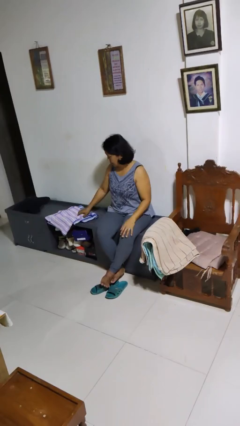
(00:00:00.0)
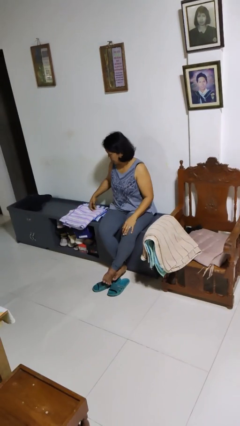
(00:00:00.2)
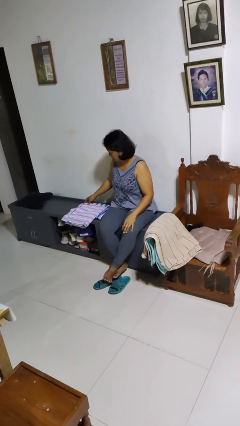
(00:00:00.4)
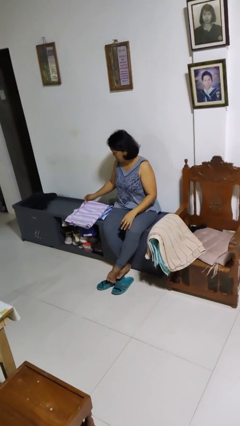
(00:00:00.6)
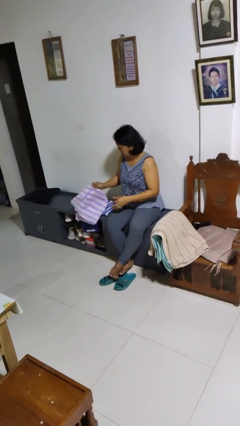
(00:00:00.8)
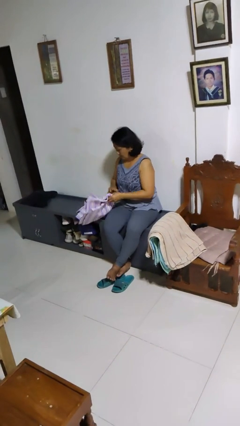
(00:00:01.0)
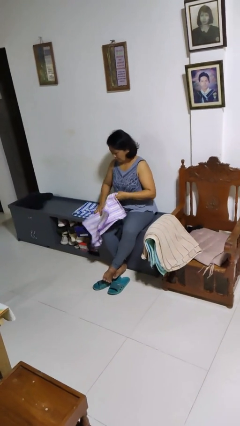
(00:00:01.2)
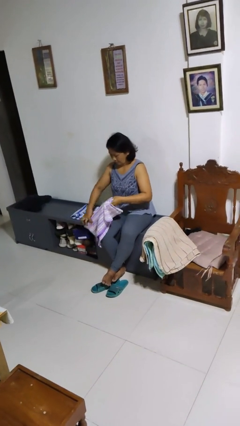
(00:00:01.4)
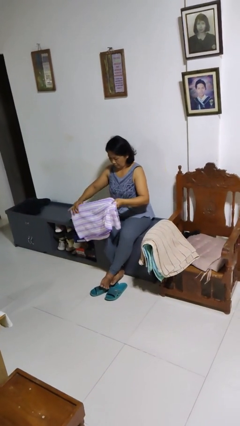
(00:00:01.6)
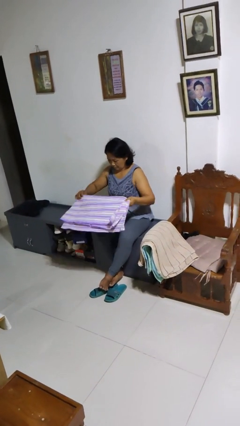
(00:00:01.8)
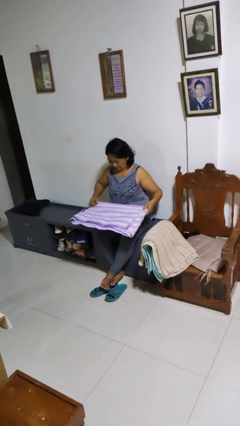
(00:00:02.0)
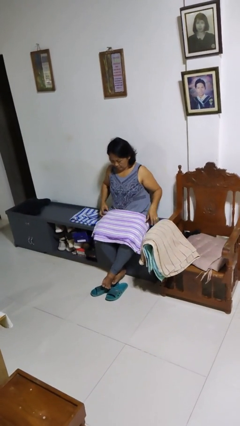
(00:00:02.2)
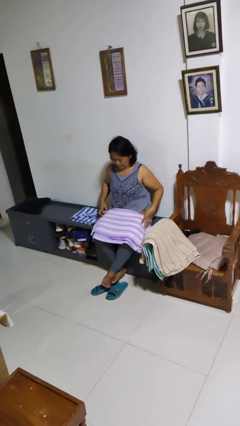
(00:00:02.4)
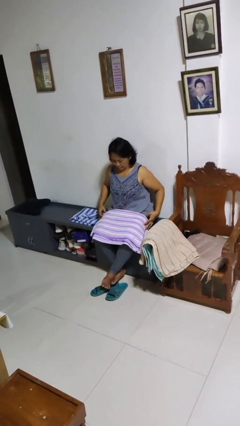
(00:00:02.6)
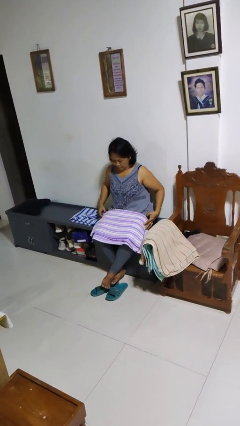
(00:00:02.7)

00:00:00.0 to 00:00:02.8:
person folds towel

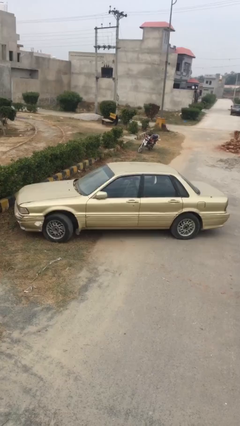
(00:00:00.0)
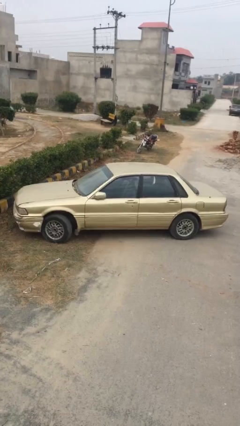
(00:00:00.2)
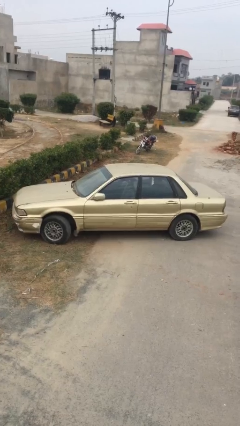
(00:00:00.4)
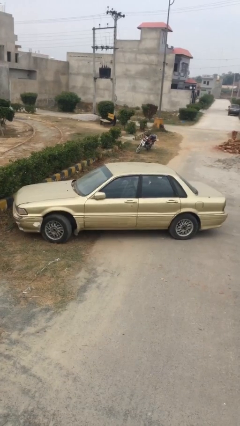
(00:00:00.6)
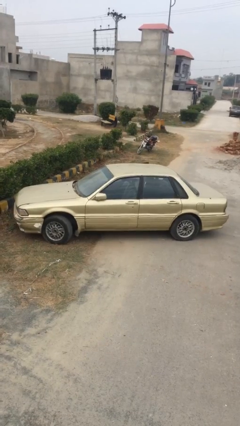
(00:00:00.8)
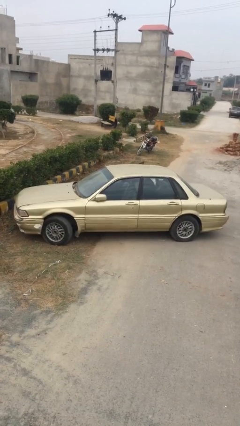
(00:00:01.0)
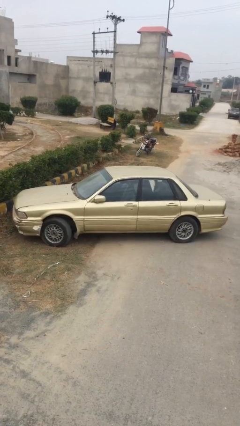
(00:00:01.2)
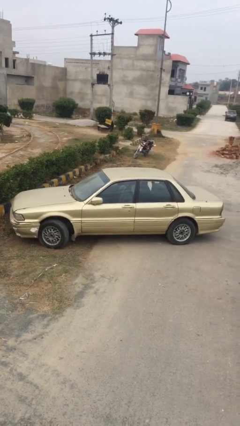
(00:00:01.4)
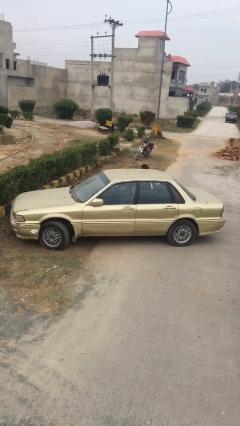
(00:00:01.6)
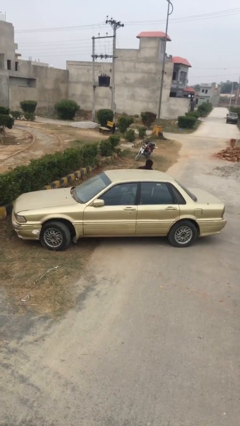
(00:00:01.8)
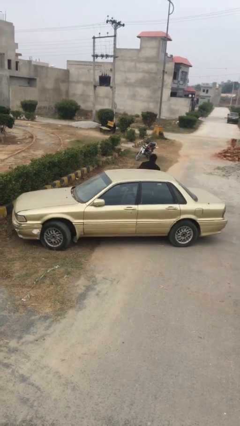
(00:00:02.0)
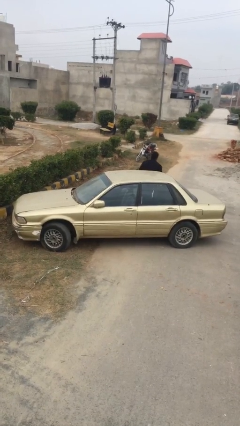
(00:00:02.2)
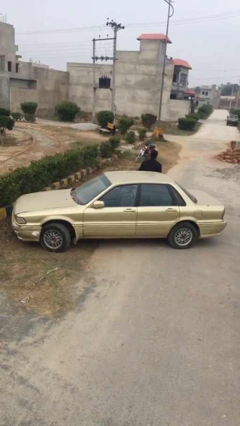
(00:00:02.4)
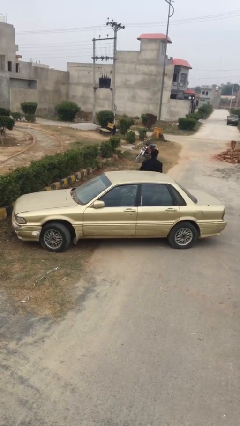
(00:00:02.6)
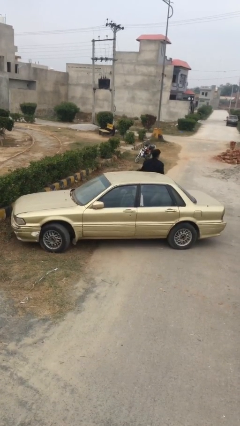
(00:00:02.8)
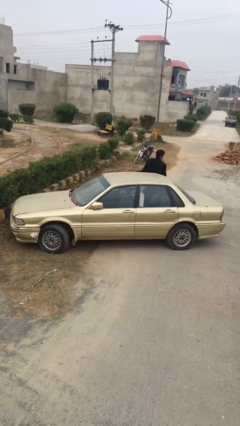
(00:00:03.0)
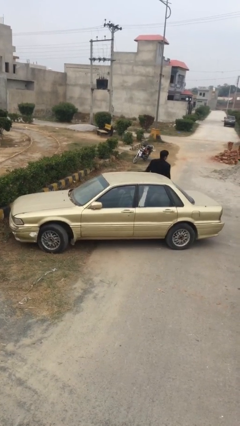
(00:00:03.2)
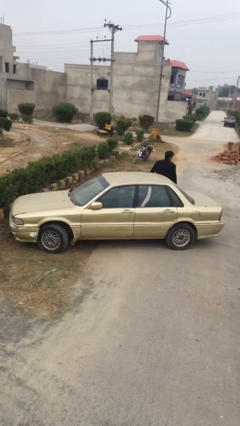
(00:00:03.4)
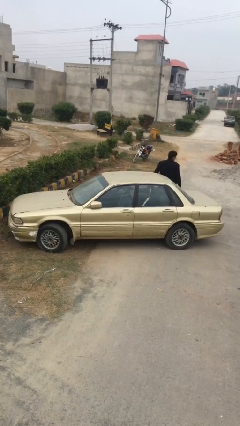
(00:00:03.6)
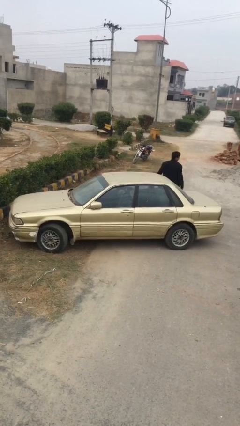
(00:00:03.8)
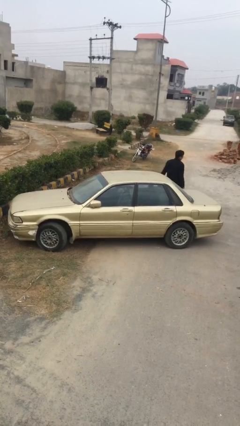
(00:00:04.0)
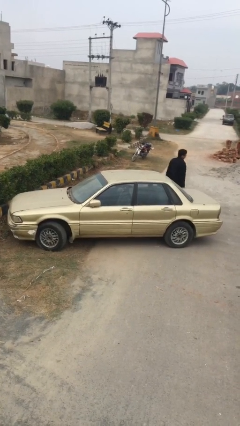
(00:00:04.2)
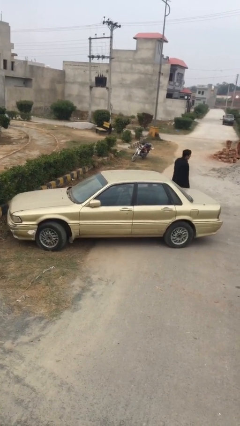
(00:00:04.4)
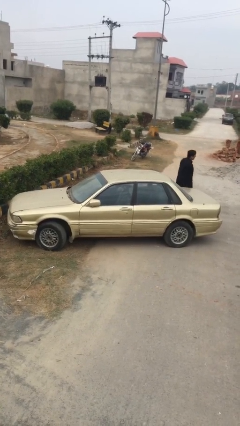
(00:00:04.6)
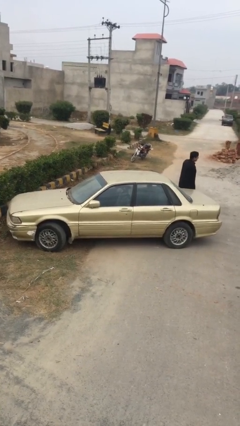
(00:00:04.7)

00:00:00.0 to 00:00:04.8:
car drops off person

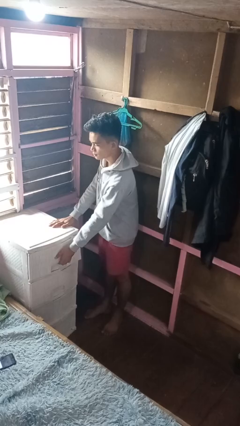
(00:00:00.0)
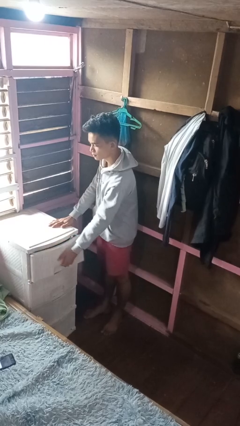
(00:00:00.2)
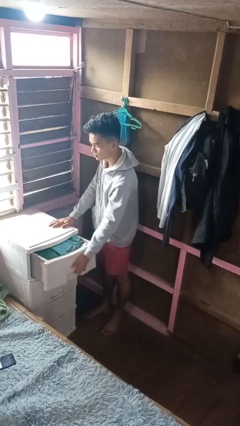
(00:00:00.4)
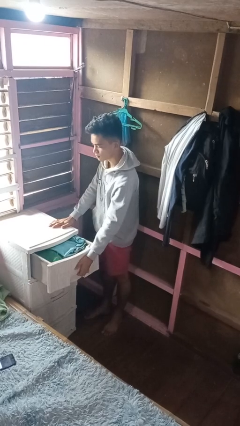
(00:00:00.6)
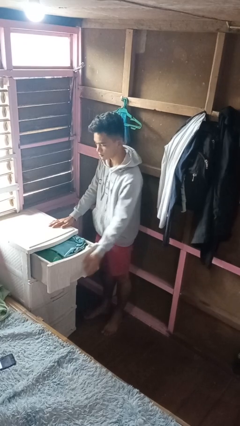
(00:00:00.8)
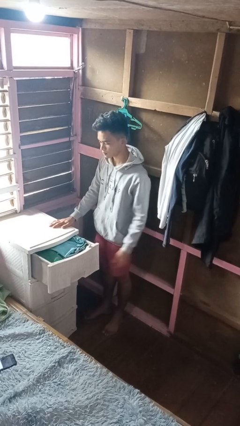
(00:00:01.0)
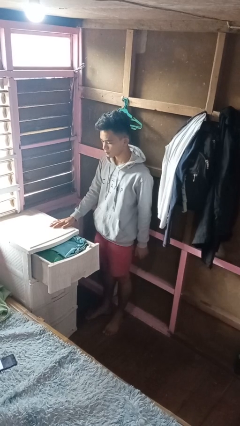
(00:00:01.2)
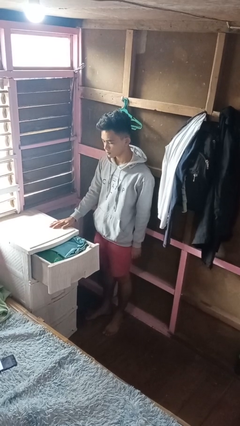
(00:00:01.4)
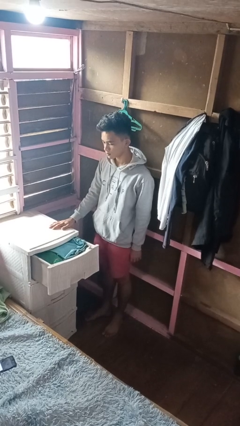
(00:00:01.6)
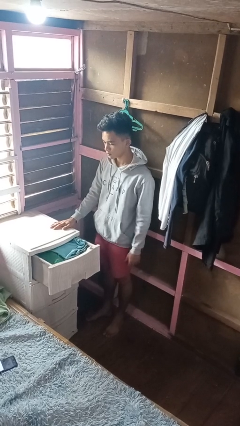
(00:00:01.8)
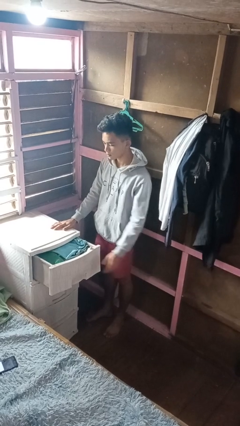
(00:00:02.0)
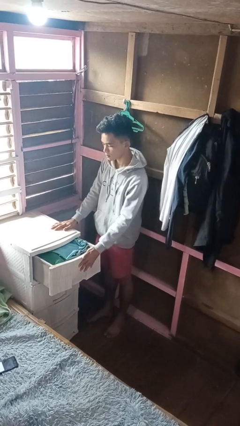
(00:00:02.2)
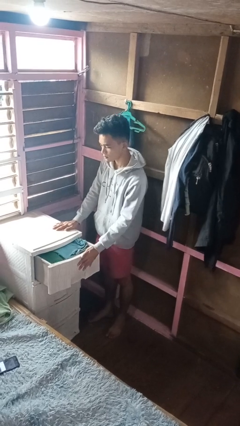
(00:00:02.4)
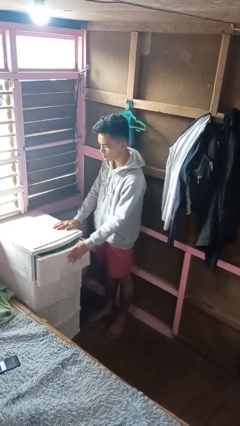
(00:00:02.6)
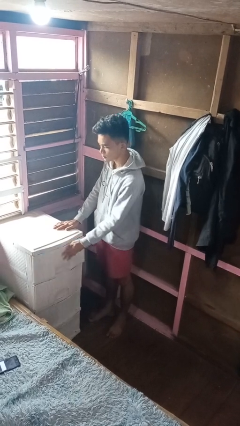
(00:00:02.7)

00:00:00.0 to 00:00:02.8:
person opens dresser drawer

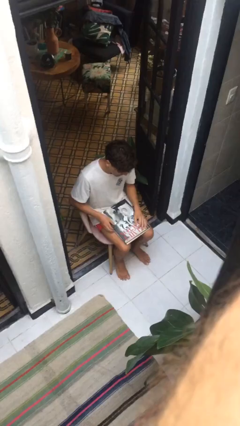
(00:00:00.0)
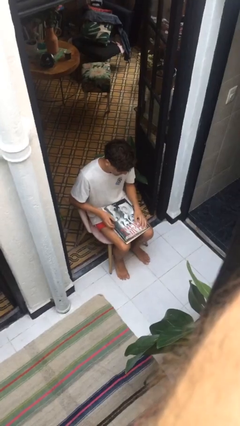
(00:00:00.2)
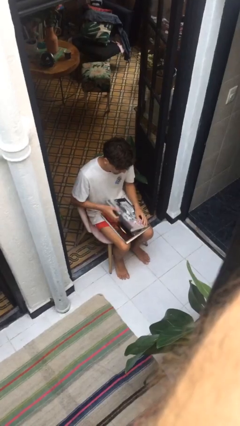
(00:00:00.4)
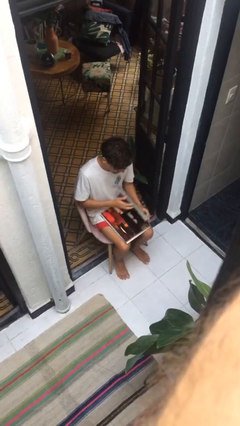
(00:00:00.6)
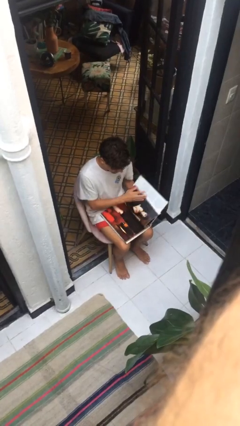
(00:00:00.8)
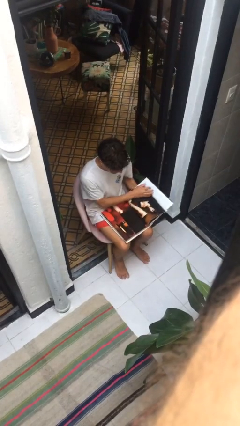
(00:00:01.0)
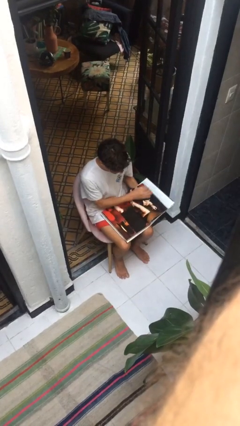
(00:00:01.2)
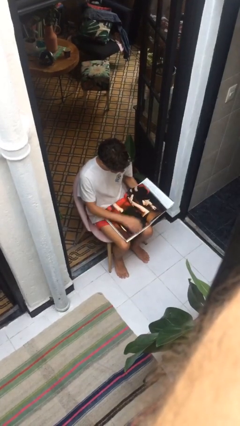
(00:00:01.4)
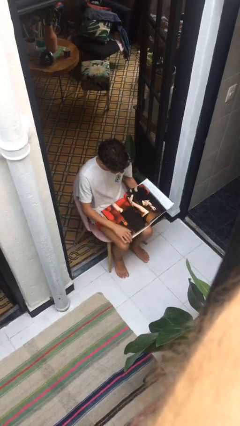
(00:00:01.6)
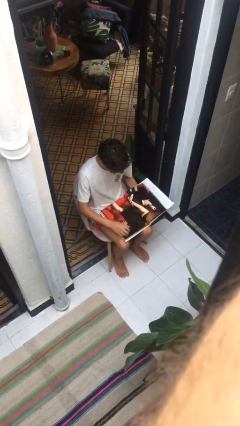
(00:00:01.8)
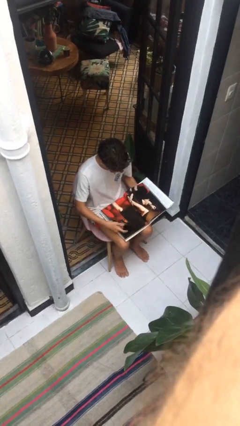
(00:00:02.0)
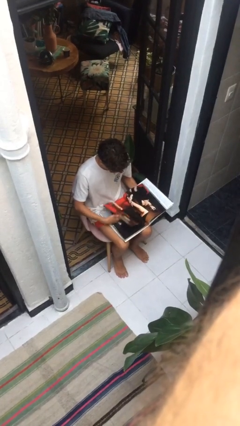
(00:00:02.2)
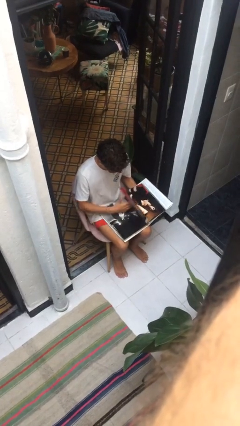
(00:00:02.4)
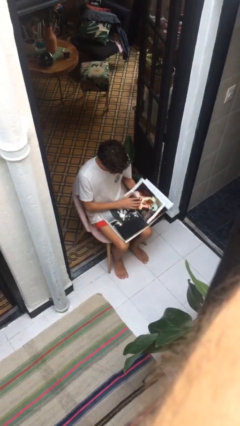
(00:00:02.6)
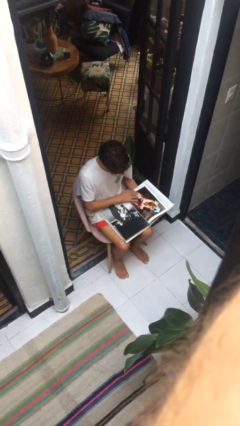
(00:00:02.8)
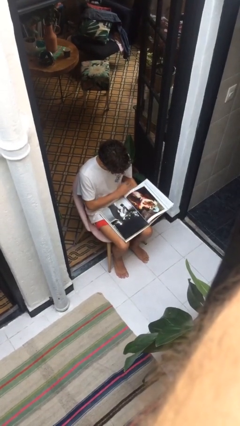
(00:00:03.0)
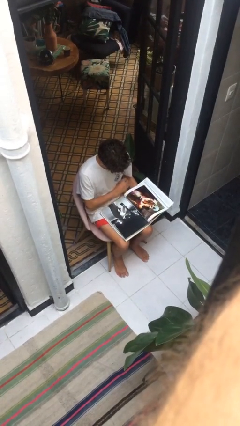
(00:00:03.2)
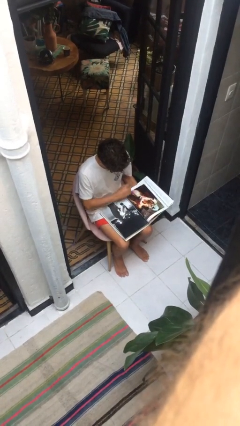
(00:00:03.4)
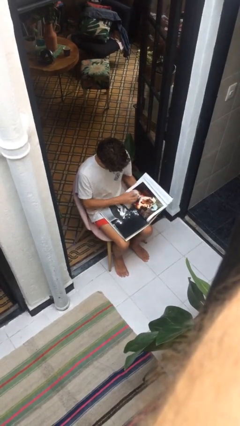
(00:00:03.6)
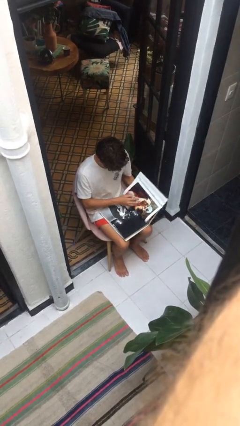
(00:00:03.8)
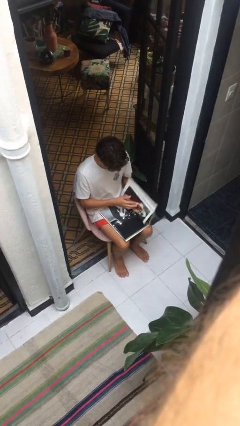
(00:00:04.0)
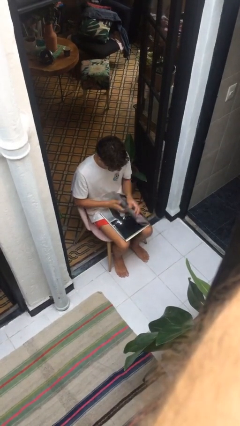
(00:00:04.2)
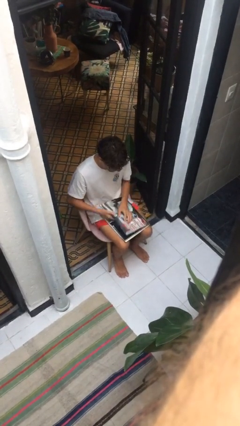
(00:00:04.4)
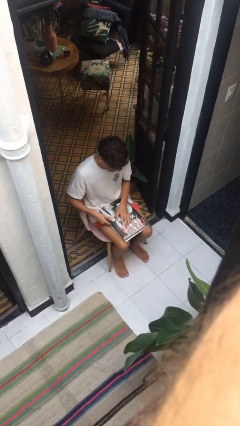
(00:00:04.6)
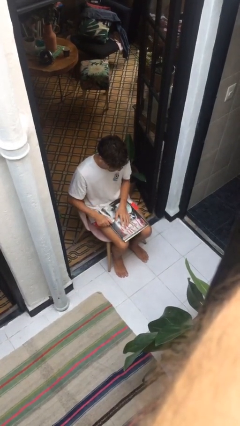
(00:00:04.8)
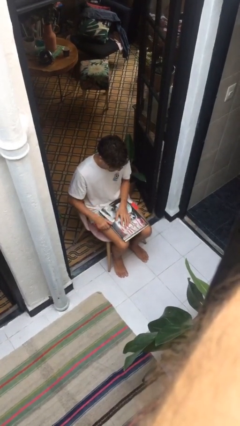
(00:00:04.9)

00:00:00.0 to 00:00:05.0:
person reads document

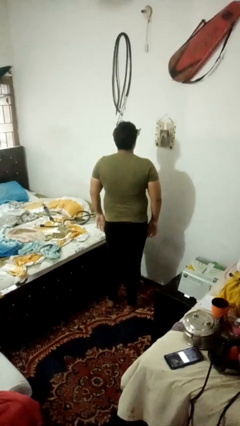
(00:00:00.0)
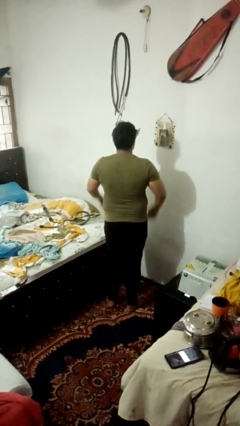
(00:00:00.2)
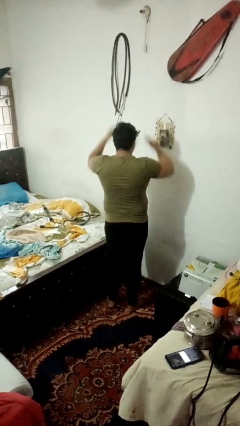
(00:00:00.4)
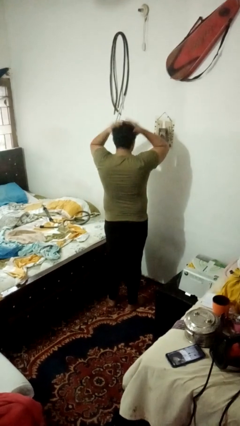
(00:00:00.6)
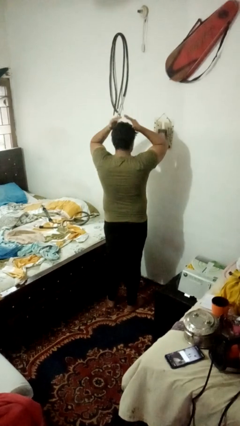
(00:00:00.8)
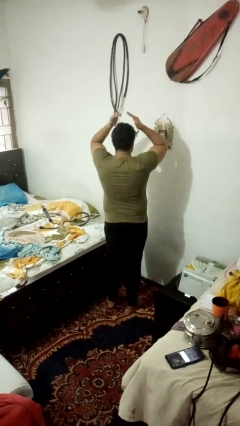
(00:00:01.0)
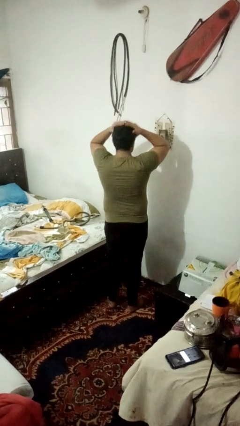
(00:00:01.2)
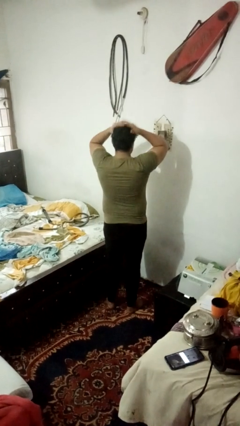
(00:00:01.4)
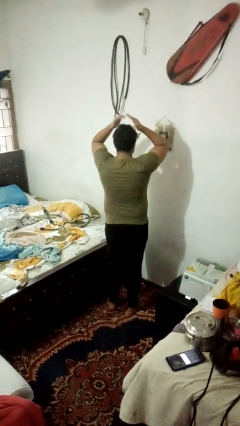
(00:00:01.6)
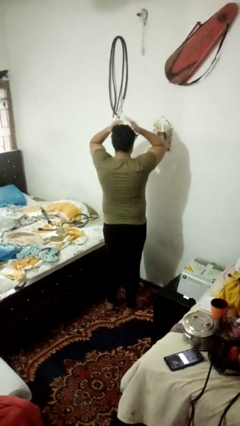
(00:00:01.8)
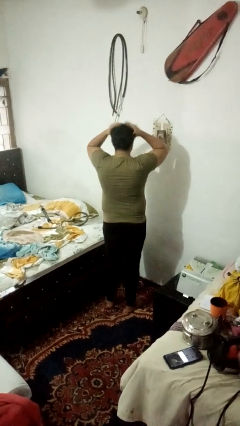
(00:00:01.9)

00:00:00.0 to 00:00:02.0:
person pats head

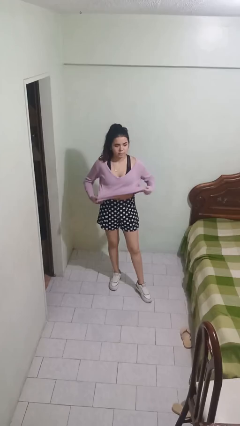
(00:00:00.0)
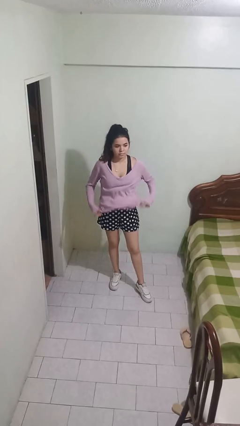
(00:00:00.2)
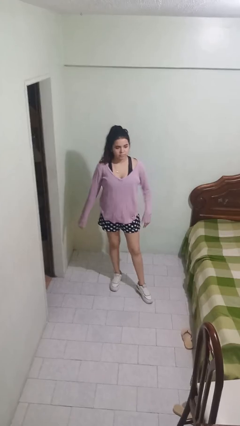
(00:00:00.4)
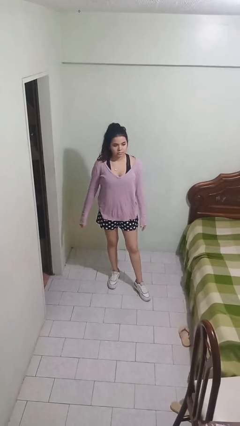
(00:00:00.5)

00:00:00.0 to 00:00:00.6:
person untucks shirt
